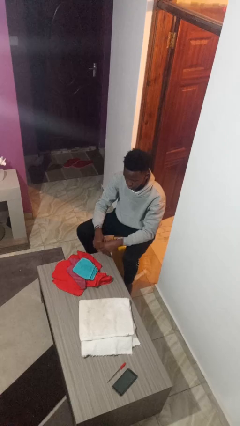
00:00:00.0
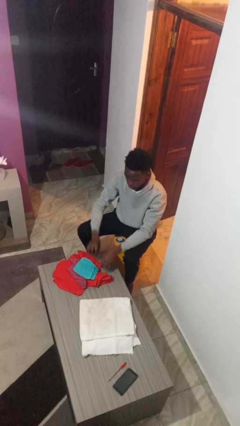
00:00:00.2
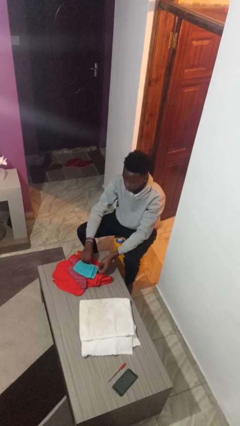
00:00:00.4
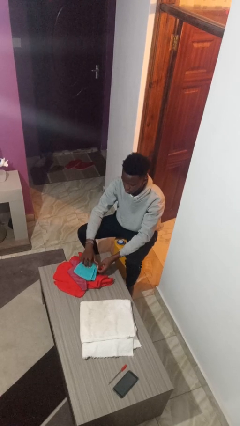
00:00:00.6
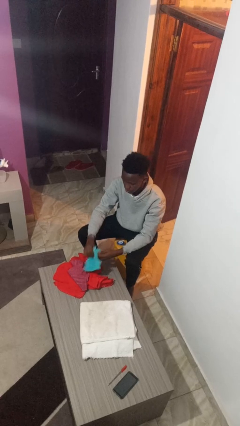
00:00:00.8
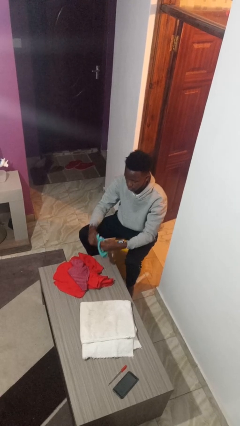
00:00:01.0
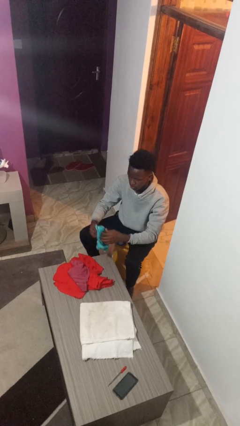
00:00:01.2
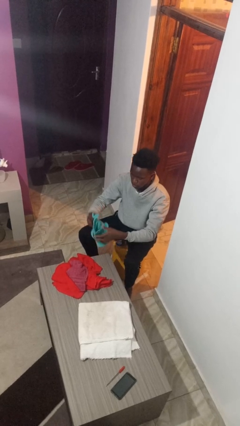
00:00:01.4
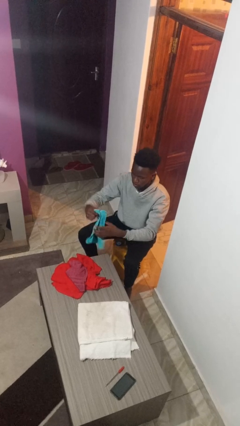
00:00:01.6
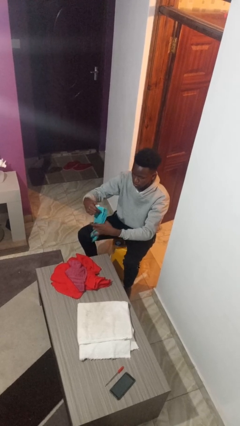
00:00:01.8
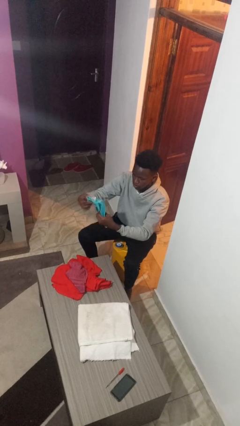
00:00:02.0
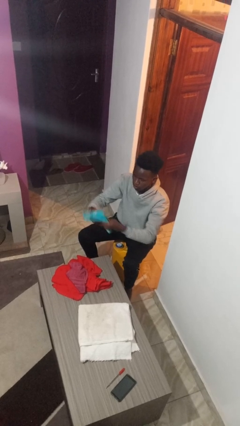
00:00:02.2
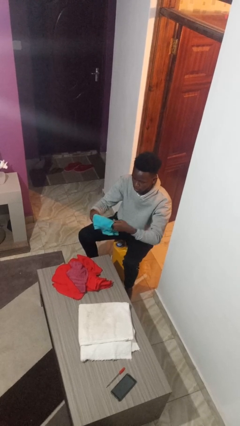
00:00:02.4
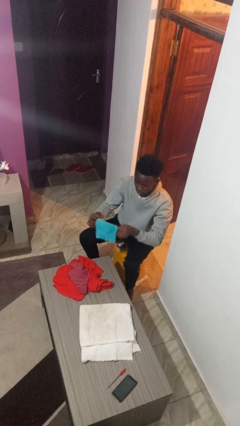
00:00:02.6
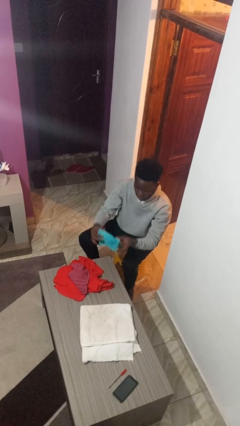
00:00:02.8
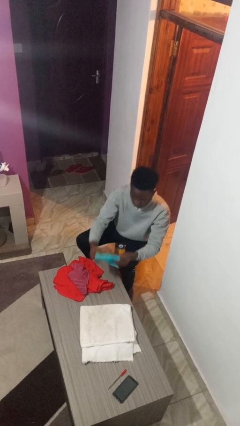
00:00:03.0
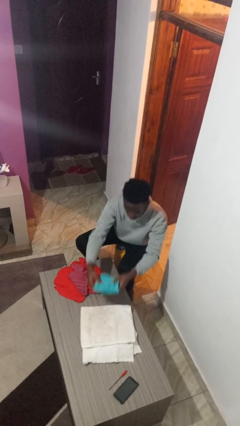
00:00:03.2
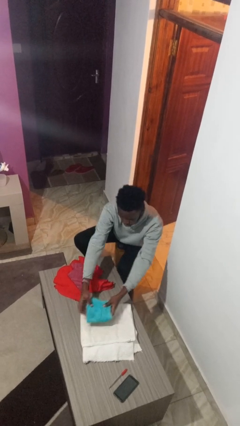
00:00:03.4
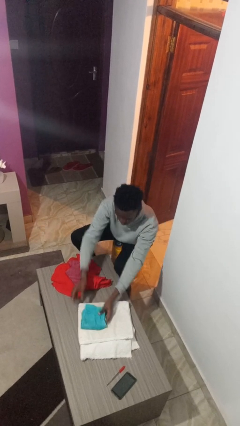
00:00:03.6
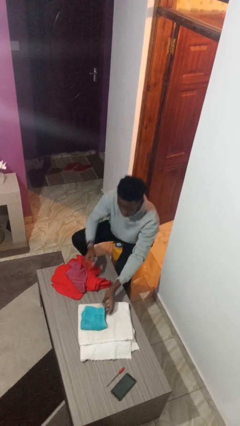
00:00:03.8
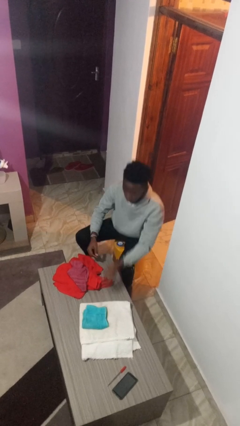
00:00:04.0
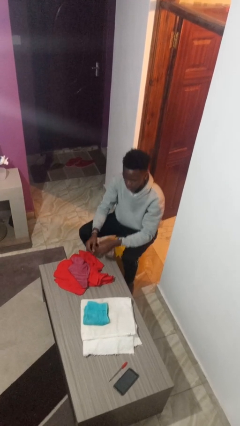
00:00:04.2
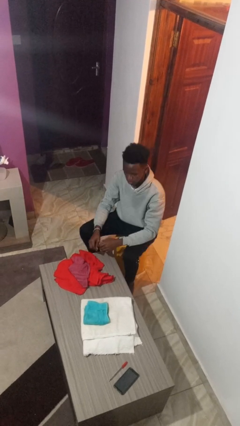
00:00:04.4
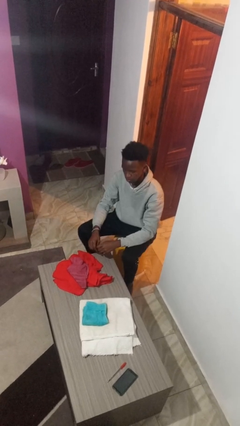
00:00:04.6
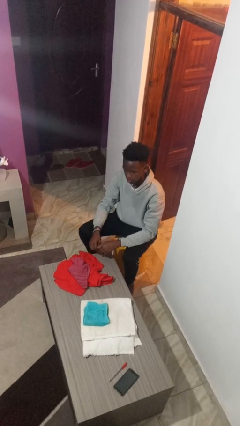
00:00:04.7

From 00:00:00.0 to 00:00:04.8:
person folds towel

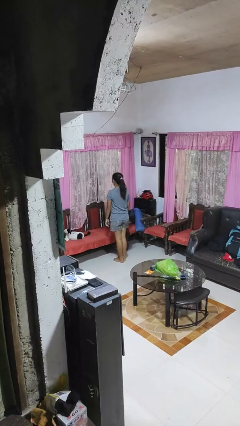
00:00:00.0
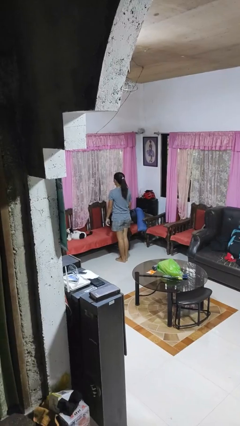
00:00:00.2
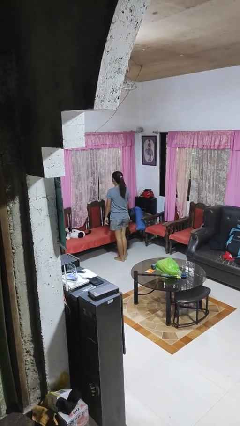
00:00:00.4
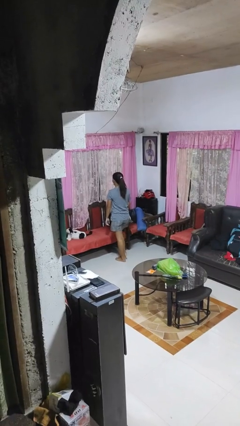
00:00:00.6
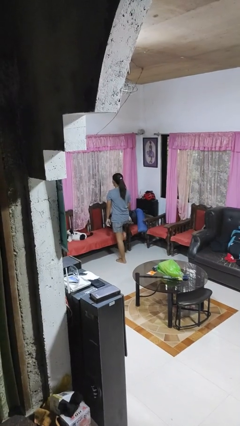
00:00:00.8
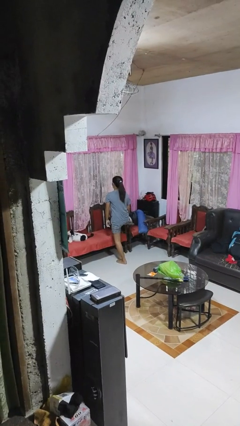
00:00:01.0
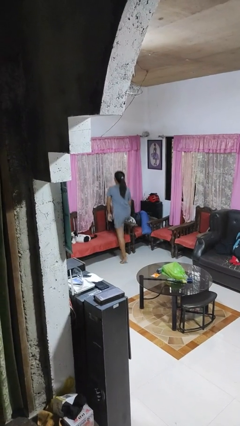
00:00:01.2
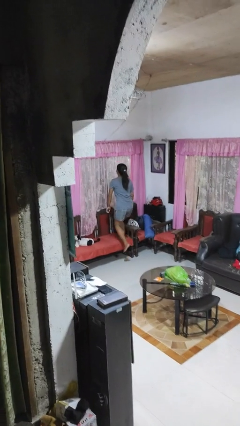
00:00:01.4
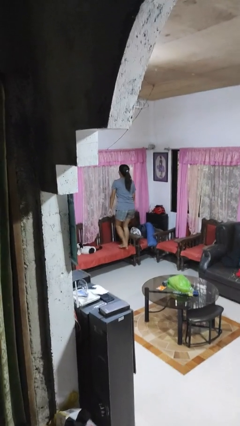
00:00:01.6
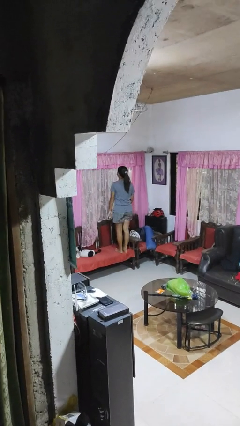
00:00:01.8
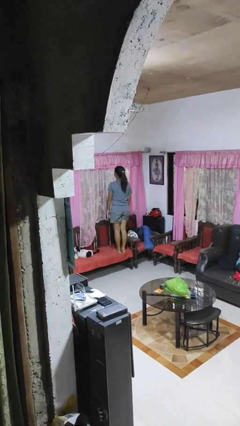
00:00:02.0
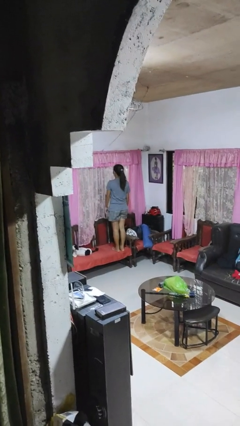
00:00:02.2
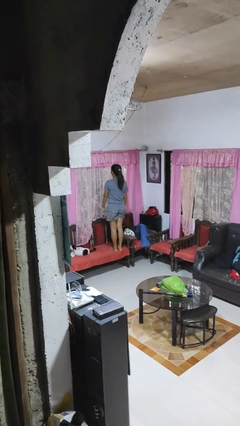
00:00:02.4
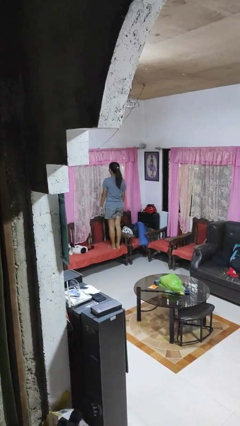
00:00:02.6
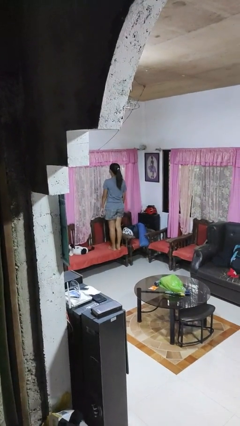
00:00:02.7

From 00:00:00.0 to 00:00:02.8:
person climbs on chair

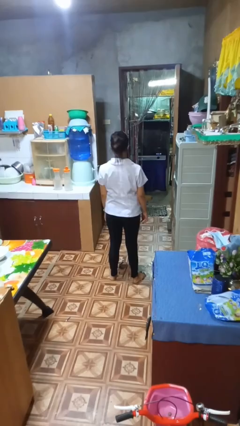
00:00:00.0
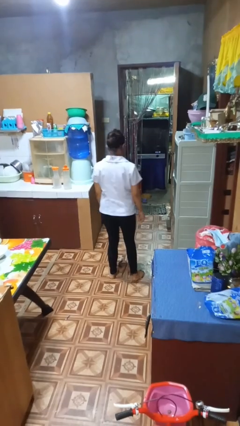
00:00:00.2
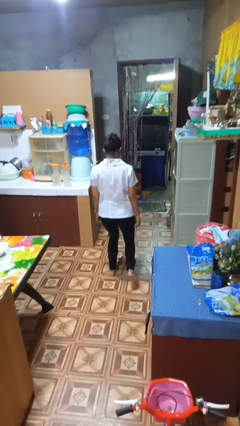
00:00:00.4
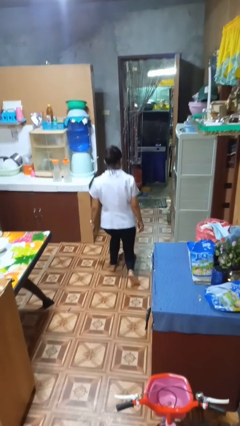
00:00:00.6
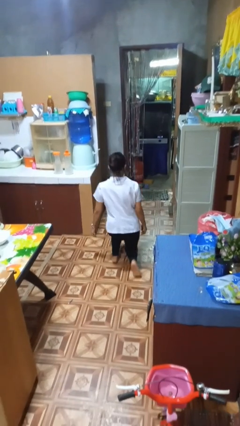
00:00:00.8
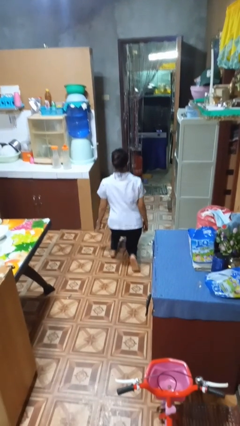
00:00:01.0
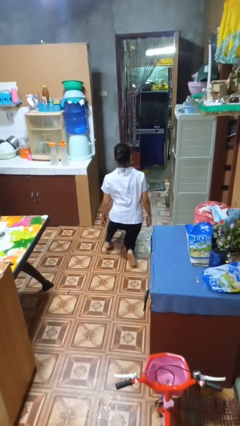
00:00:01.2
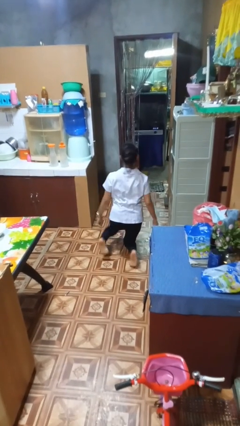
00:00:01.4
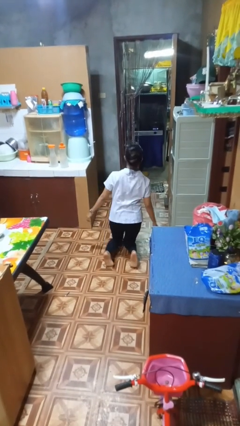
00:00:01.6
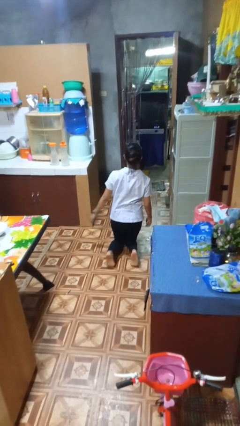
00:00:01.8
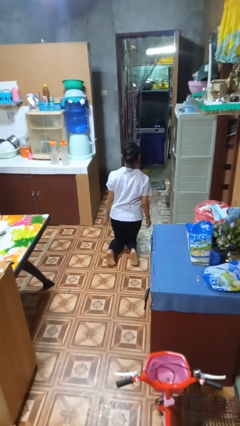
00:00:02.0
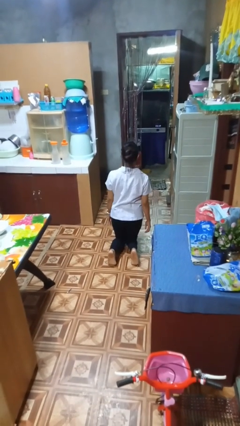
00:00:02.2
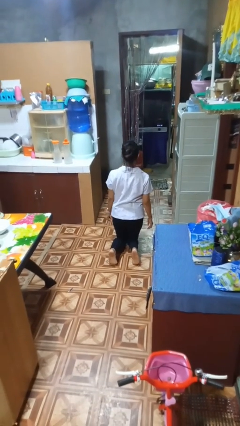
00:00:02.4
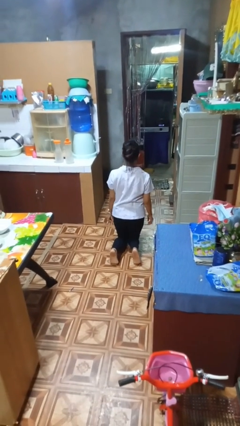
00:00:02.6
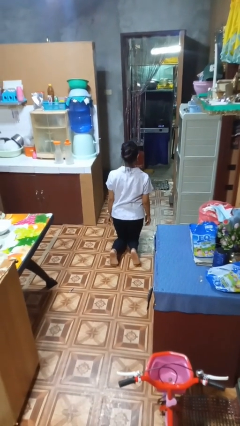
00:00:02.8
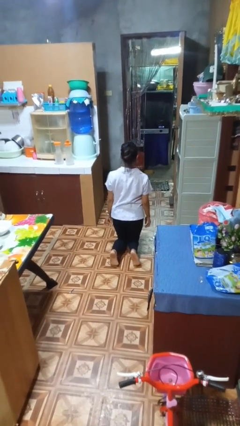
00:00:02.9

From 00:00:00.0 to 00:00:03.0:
person kneels

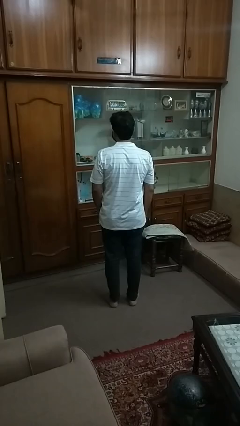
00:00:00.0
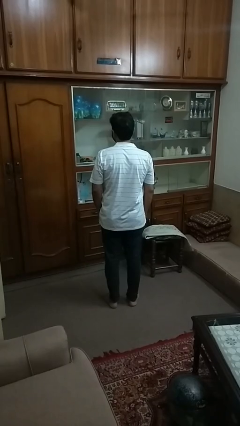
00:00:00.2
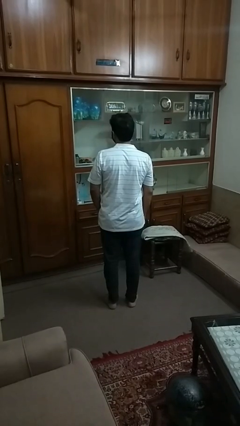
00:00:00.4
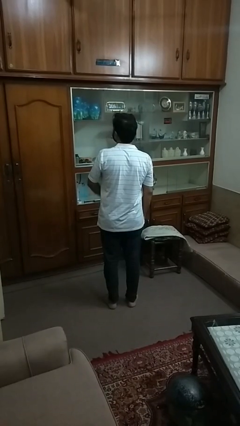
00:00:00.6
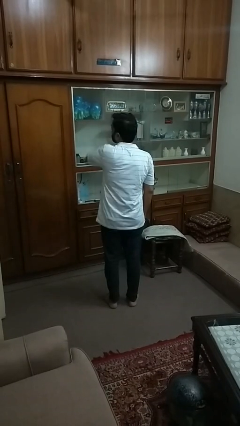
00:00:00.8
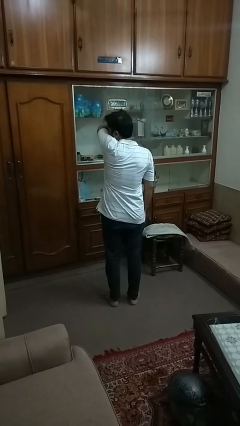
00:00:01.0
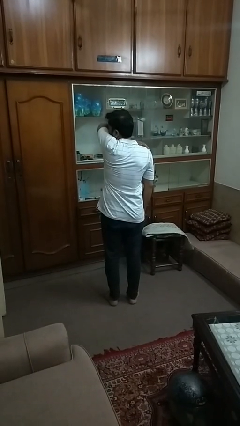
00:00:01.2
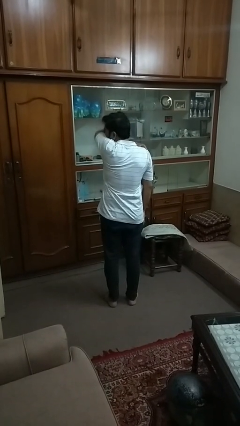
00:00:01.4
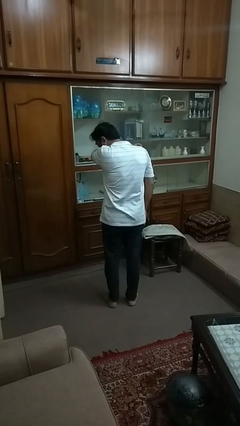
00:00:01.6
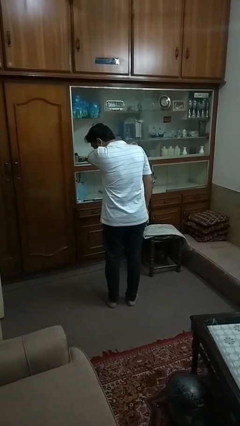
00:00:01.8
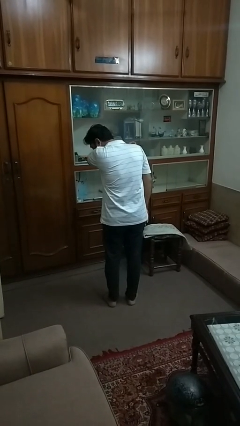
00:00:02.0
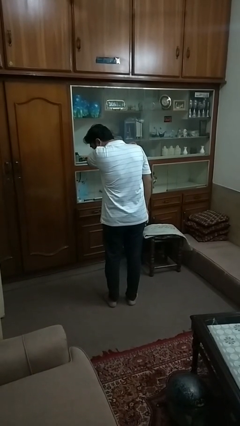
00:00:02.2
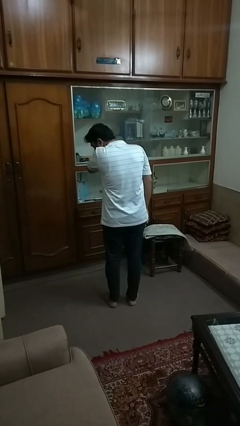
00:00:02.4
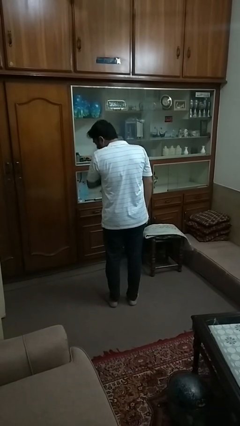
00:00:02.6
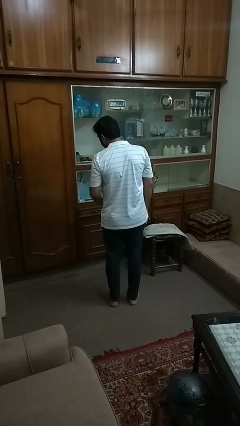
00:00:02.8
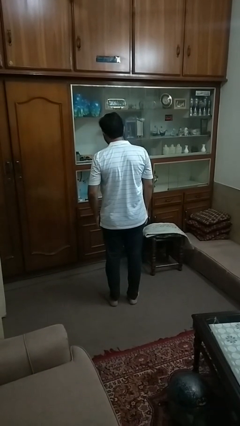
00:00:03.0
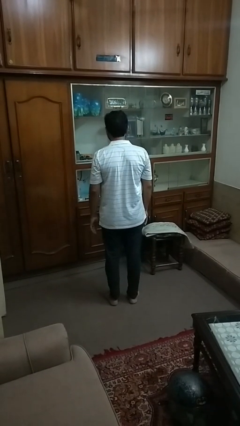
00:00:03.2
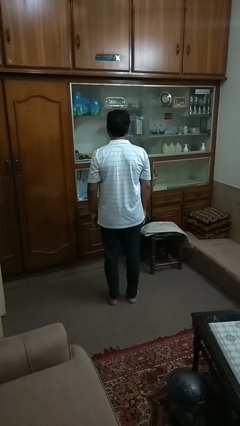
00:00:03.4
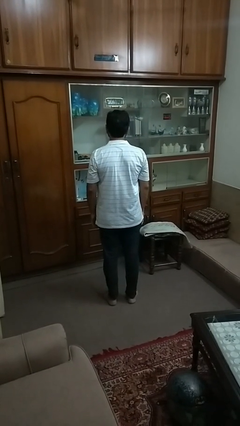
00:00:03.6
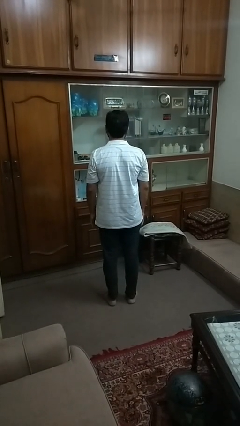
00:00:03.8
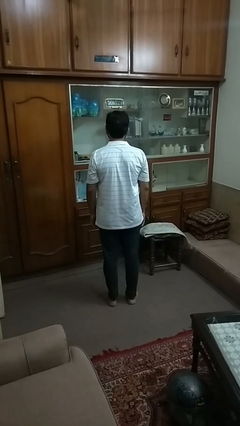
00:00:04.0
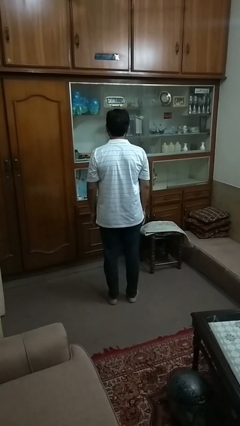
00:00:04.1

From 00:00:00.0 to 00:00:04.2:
person sneezes into arm

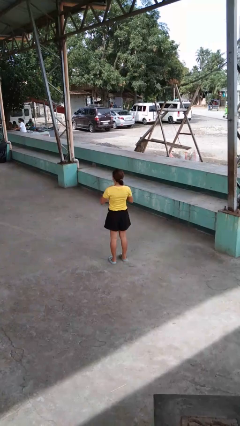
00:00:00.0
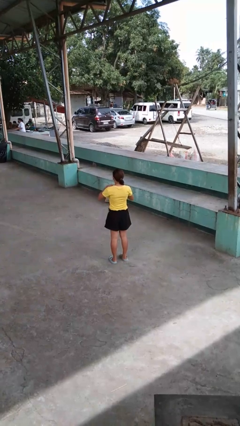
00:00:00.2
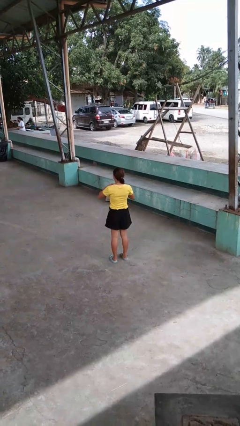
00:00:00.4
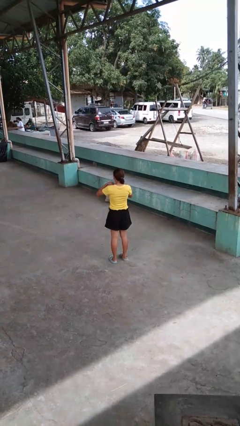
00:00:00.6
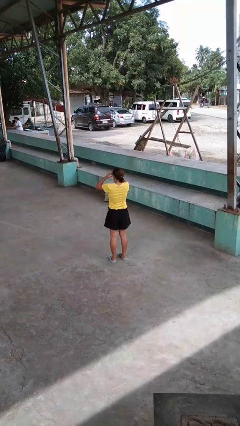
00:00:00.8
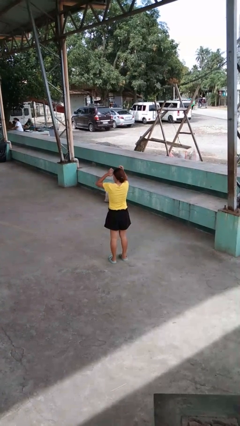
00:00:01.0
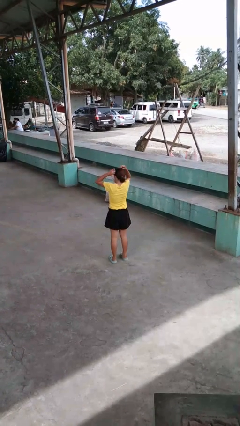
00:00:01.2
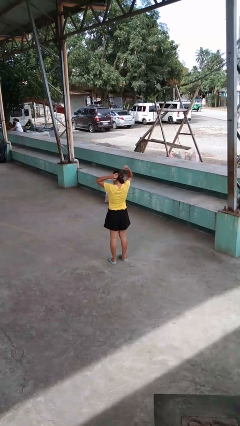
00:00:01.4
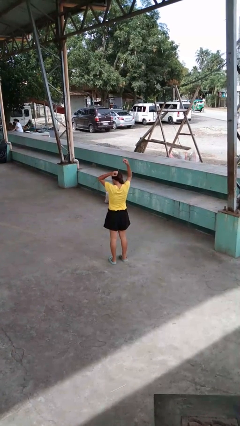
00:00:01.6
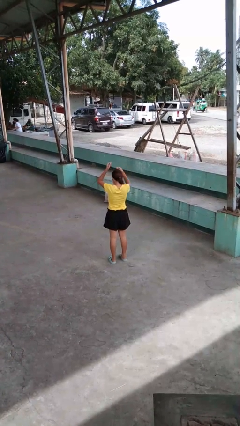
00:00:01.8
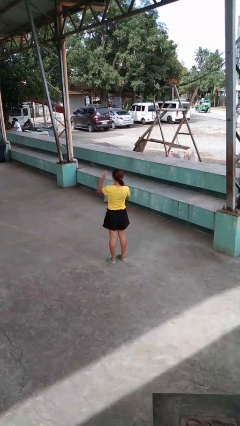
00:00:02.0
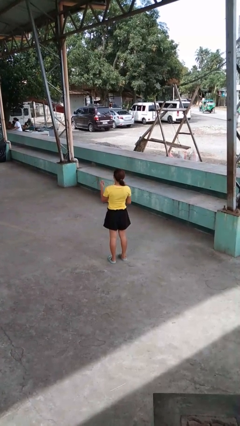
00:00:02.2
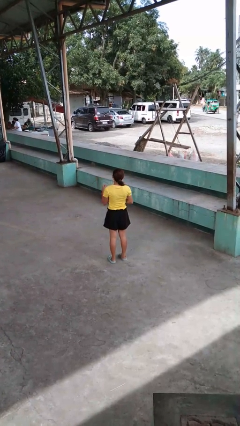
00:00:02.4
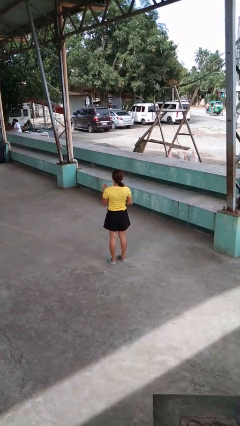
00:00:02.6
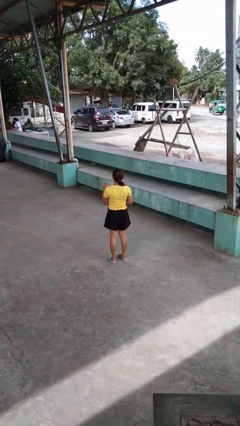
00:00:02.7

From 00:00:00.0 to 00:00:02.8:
person takes off necklace
